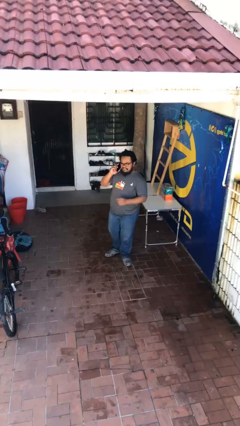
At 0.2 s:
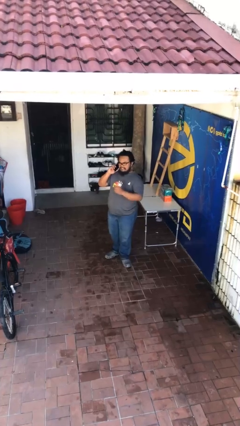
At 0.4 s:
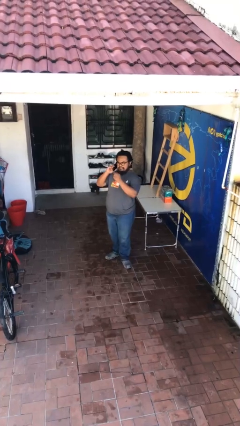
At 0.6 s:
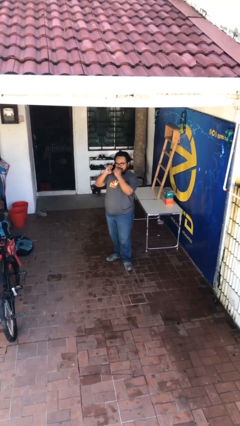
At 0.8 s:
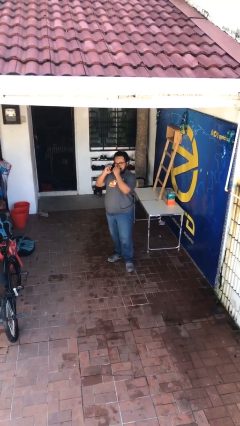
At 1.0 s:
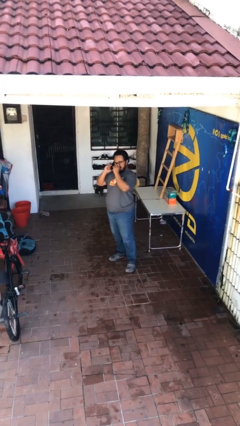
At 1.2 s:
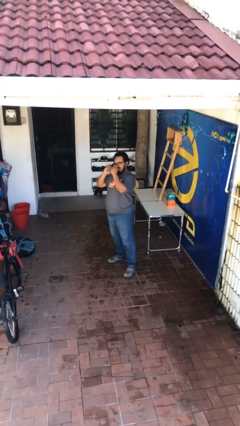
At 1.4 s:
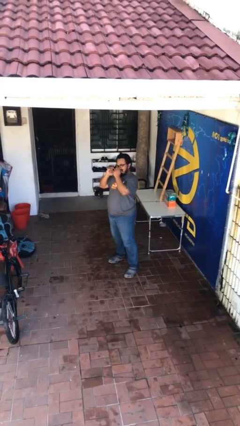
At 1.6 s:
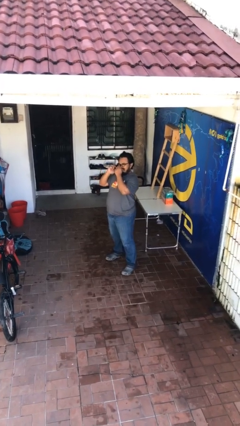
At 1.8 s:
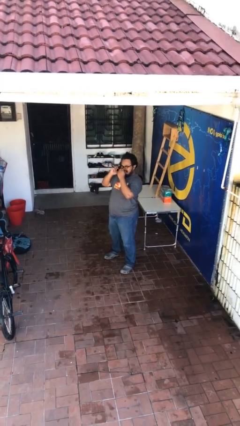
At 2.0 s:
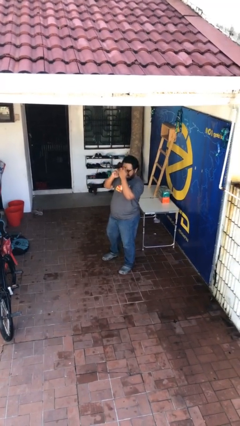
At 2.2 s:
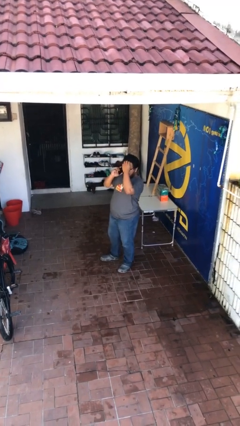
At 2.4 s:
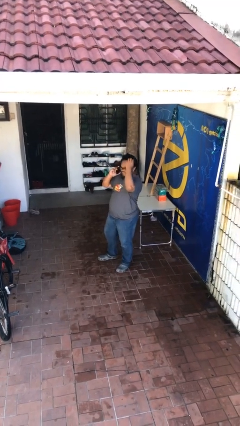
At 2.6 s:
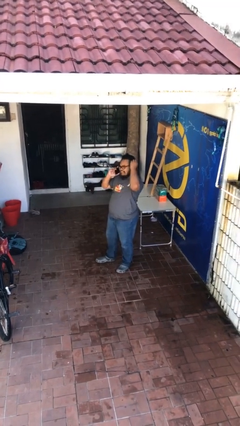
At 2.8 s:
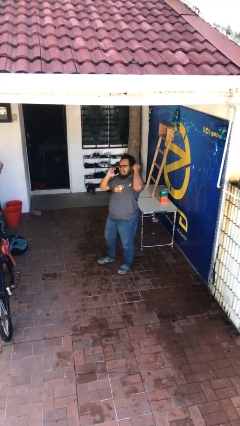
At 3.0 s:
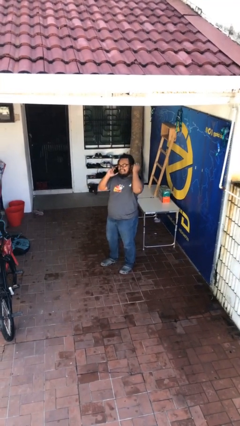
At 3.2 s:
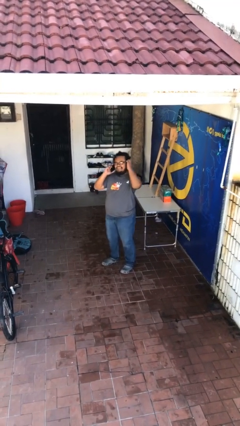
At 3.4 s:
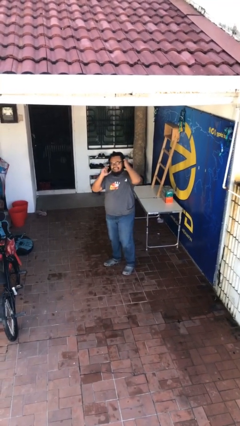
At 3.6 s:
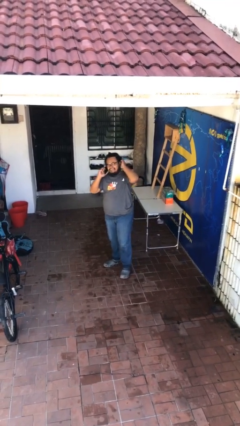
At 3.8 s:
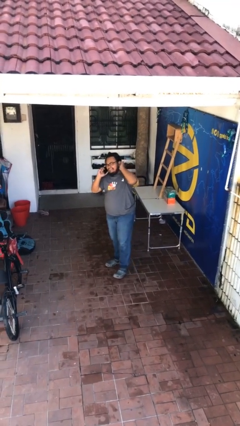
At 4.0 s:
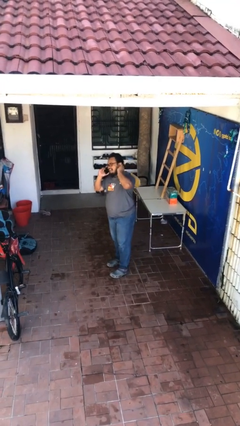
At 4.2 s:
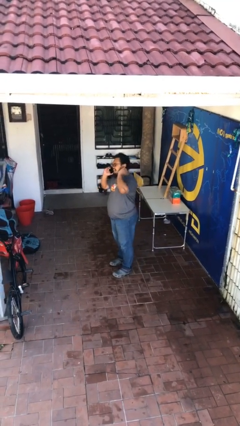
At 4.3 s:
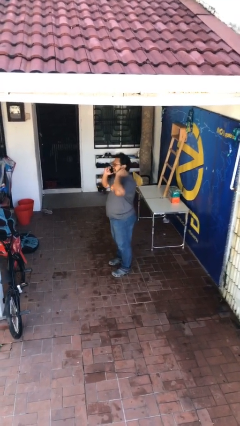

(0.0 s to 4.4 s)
person talks on phone

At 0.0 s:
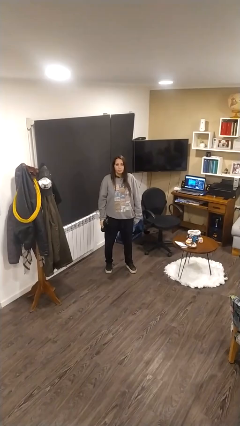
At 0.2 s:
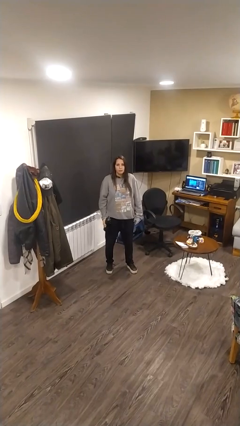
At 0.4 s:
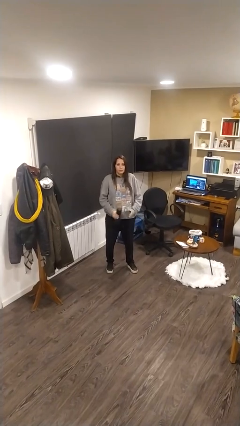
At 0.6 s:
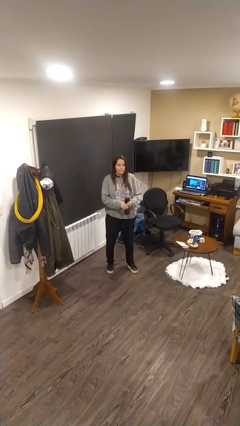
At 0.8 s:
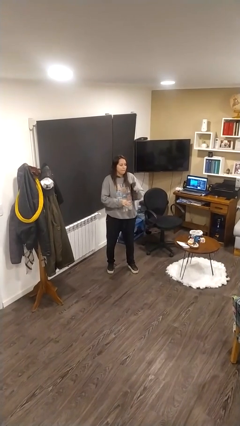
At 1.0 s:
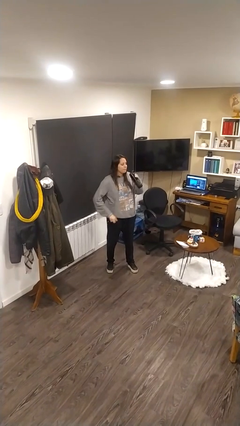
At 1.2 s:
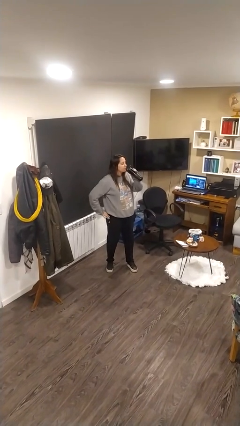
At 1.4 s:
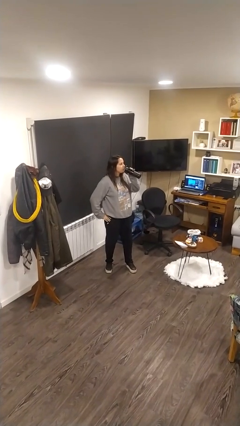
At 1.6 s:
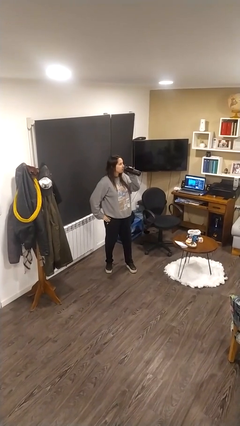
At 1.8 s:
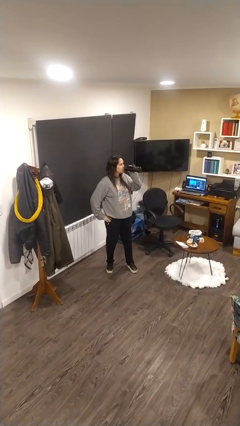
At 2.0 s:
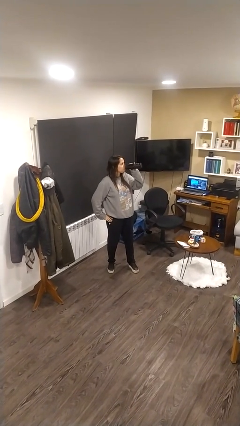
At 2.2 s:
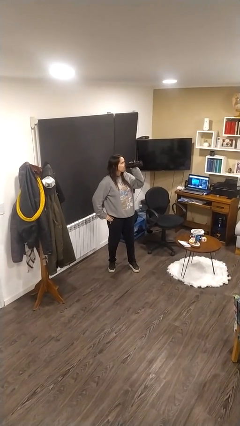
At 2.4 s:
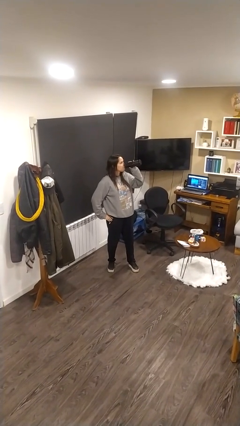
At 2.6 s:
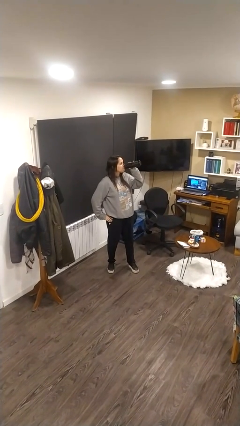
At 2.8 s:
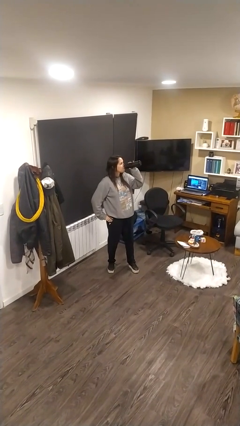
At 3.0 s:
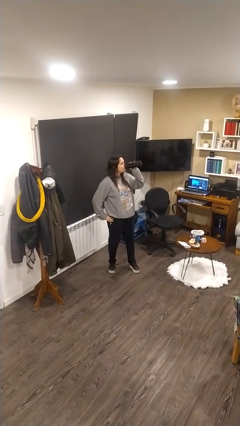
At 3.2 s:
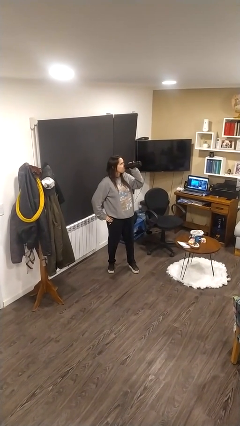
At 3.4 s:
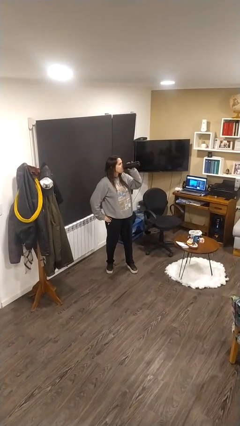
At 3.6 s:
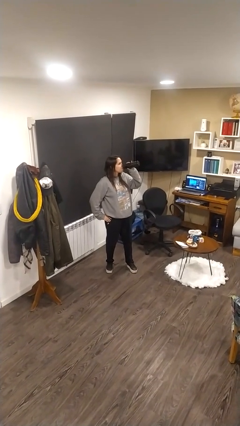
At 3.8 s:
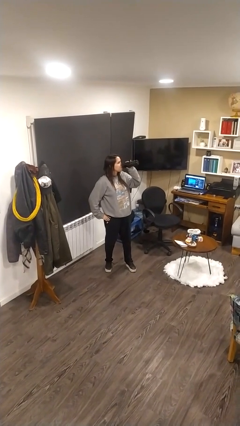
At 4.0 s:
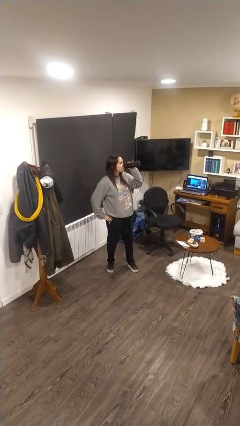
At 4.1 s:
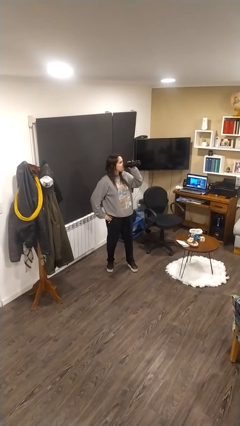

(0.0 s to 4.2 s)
person drinks from bottle

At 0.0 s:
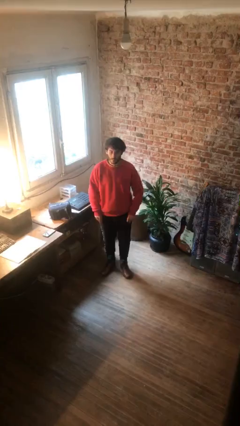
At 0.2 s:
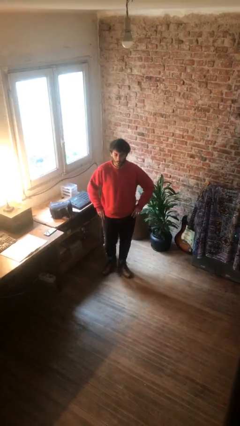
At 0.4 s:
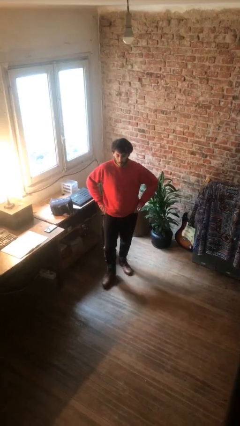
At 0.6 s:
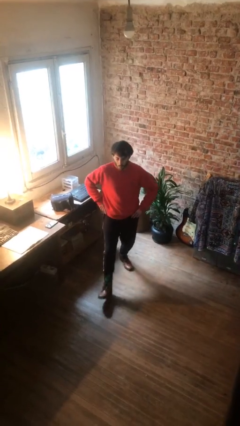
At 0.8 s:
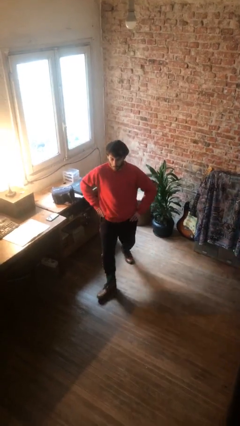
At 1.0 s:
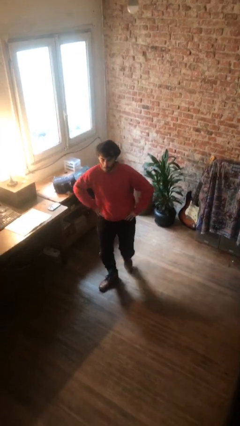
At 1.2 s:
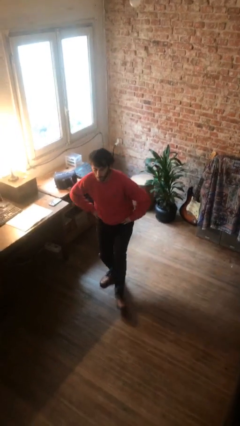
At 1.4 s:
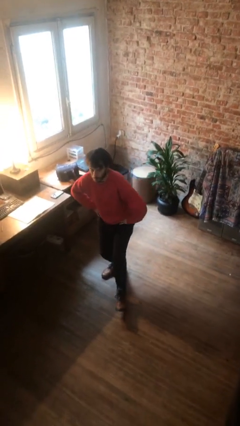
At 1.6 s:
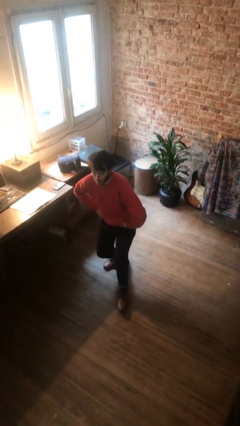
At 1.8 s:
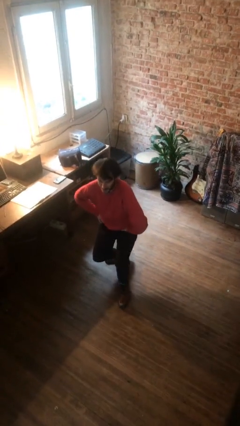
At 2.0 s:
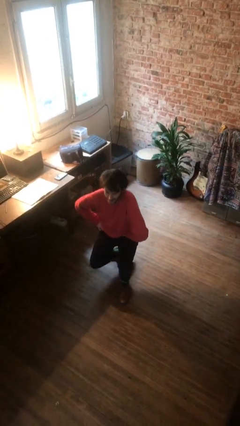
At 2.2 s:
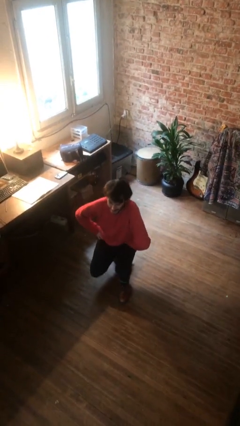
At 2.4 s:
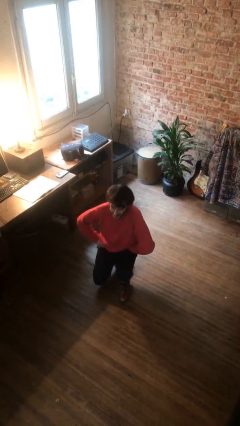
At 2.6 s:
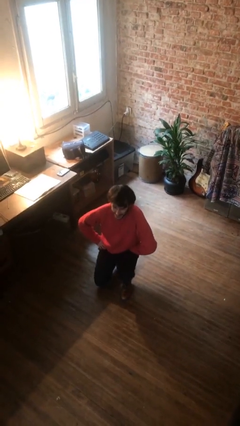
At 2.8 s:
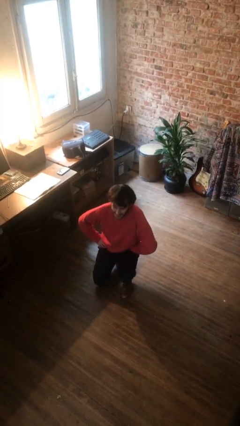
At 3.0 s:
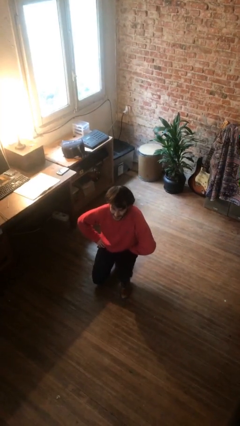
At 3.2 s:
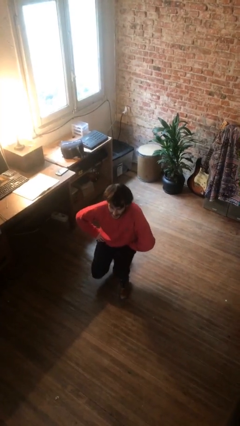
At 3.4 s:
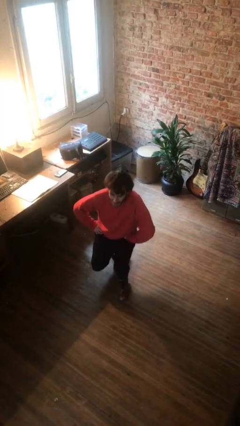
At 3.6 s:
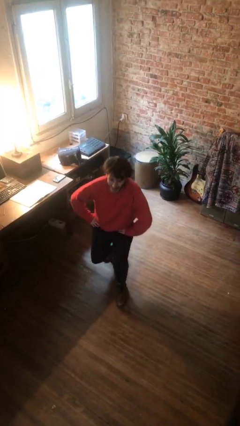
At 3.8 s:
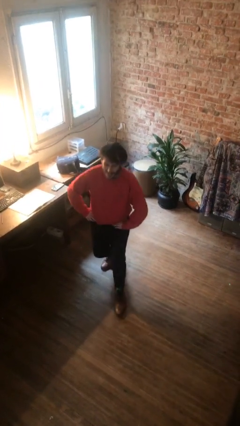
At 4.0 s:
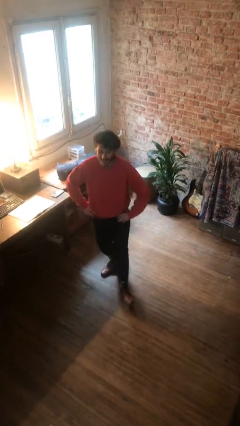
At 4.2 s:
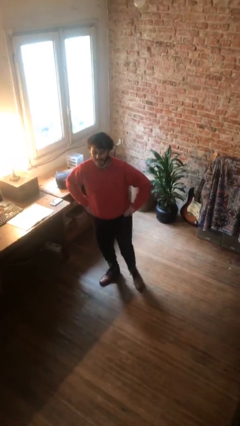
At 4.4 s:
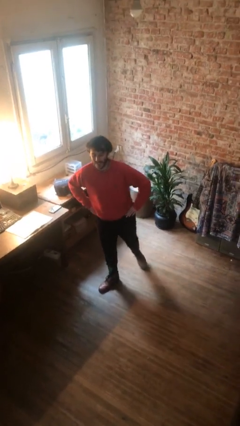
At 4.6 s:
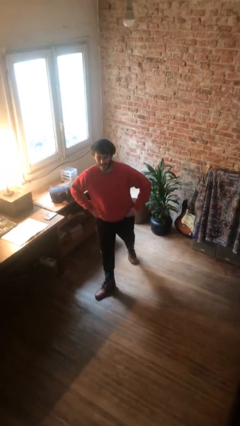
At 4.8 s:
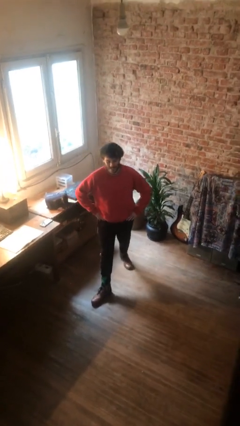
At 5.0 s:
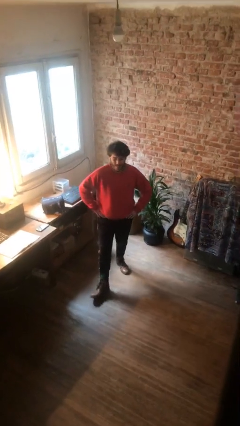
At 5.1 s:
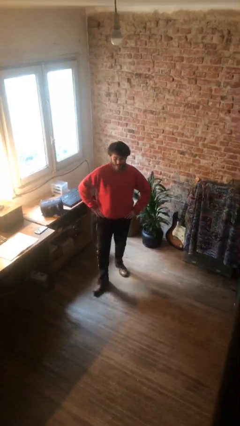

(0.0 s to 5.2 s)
person exercises with lunges

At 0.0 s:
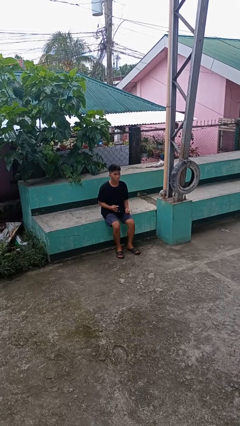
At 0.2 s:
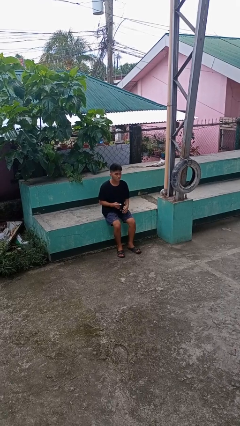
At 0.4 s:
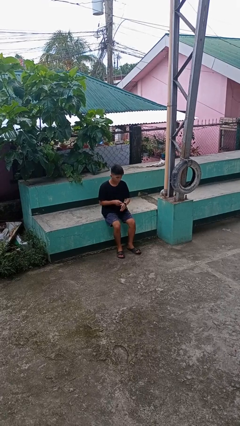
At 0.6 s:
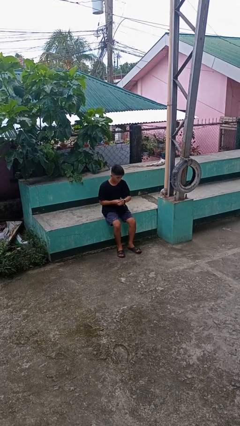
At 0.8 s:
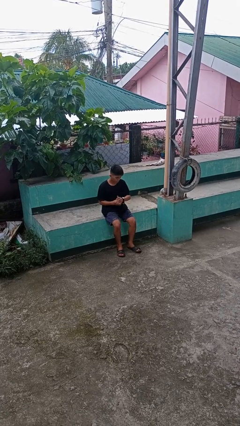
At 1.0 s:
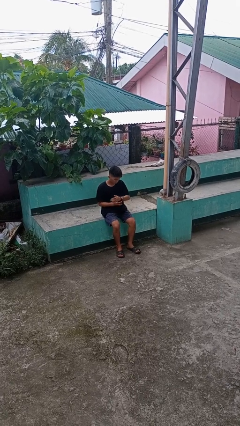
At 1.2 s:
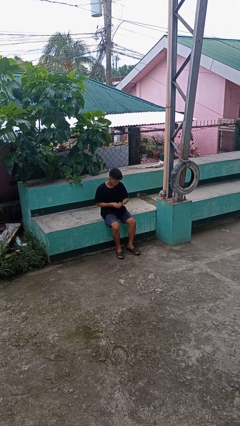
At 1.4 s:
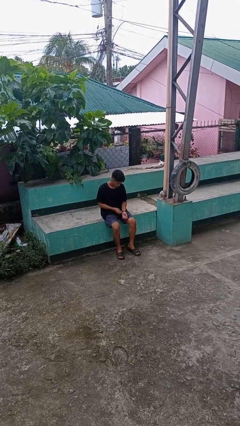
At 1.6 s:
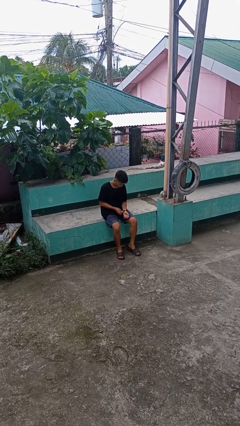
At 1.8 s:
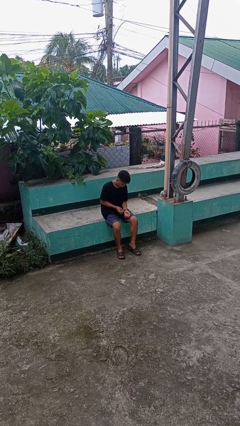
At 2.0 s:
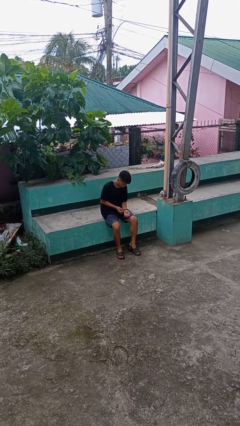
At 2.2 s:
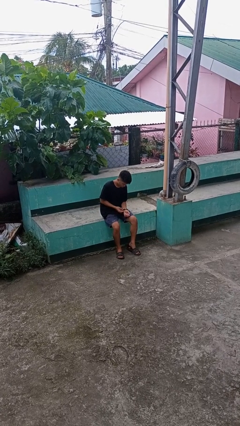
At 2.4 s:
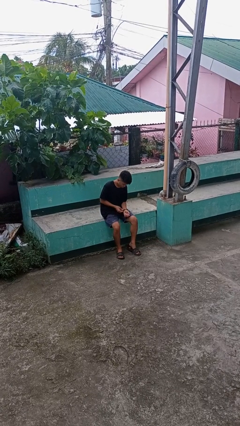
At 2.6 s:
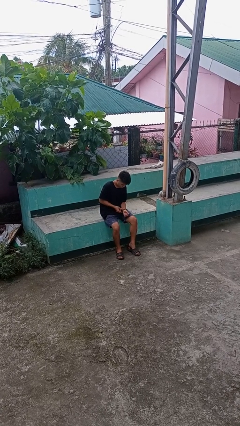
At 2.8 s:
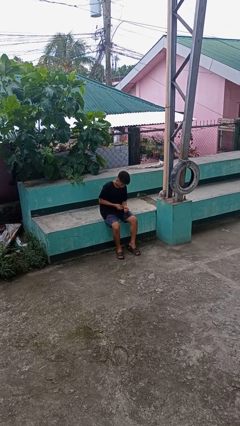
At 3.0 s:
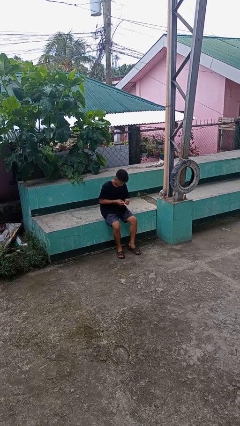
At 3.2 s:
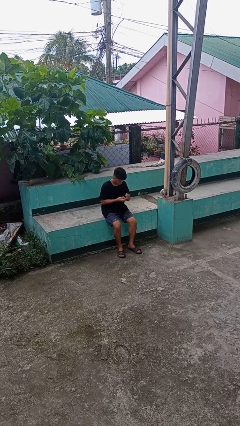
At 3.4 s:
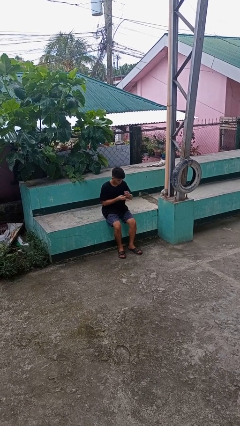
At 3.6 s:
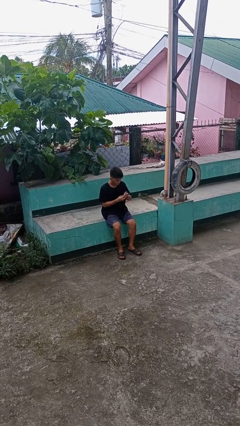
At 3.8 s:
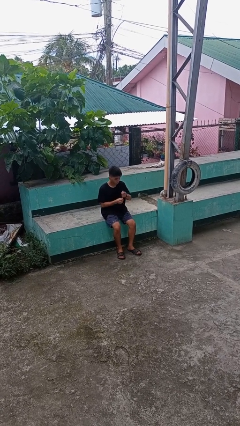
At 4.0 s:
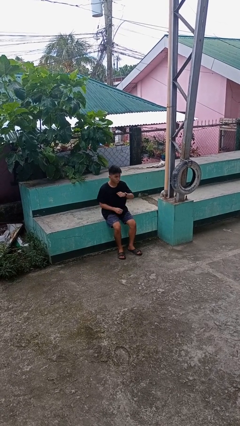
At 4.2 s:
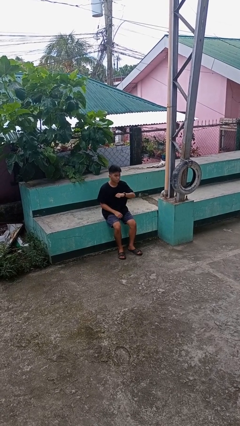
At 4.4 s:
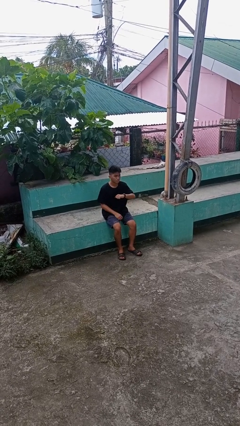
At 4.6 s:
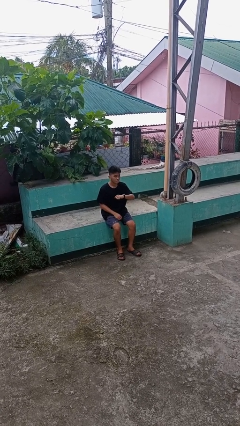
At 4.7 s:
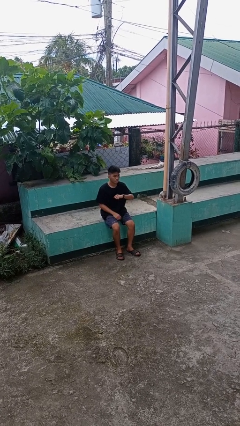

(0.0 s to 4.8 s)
person puts on wristwatch
